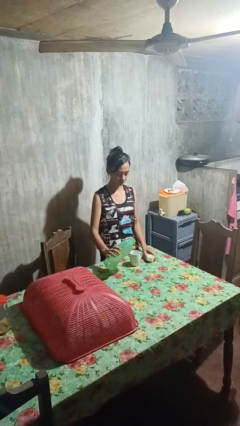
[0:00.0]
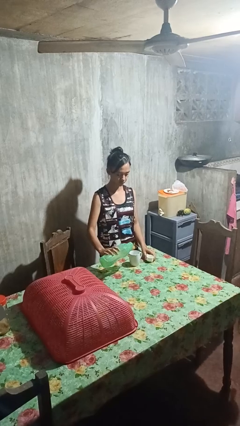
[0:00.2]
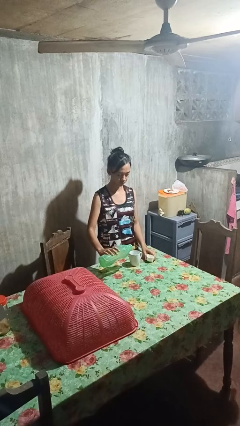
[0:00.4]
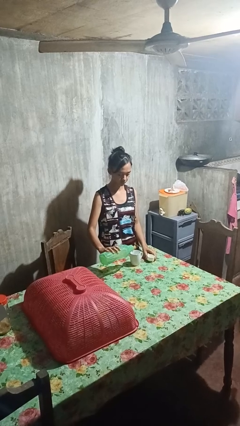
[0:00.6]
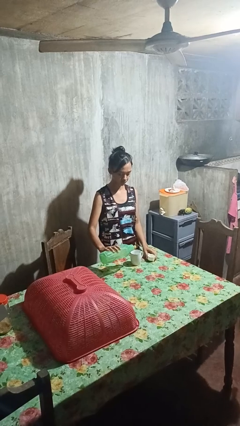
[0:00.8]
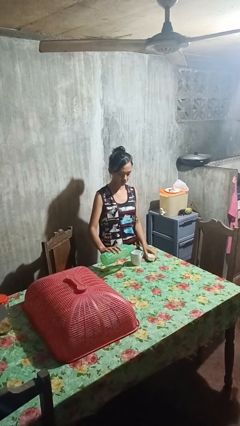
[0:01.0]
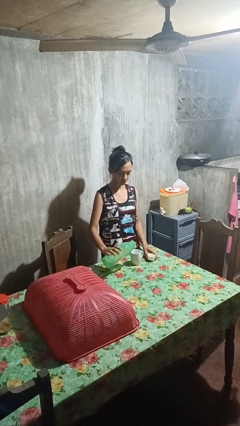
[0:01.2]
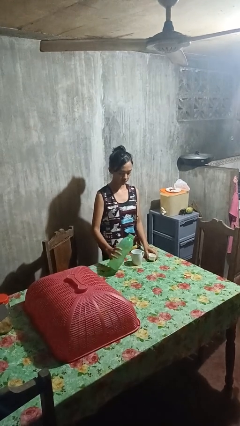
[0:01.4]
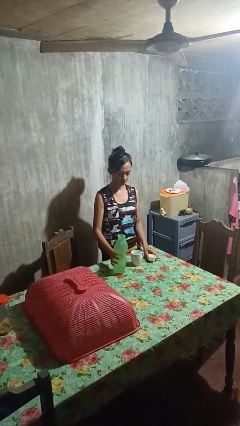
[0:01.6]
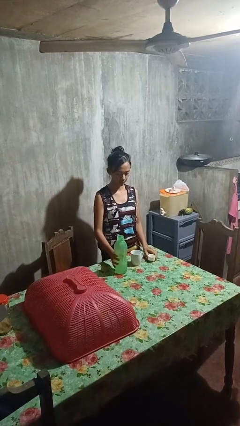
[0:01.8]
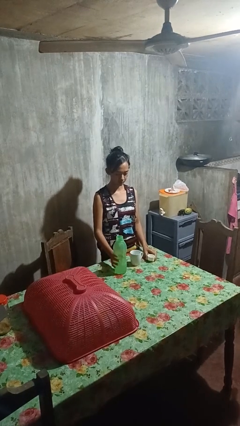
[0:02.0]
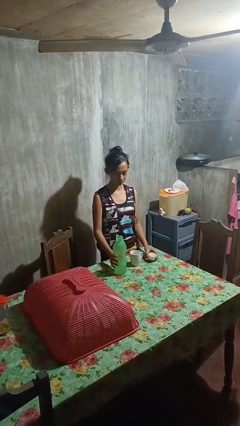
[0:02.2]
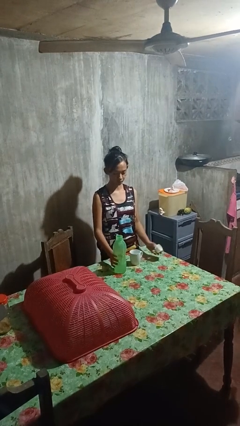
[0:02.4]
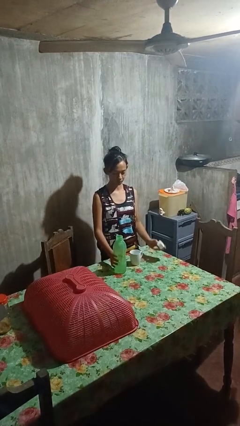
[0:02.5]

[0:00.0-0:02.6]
person pours liquid into cup

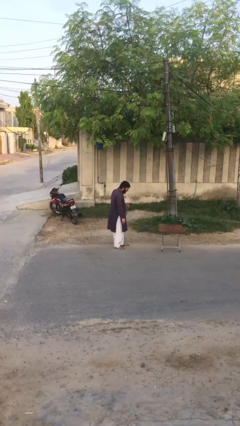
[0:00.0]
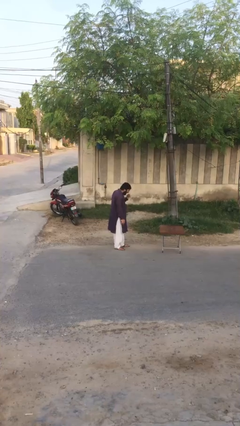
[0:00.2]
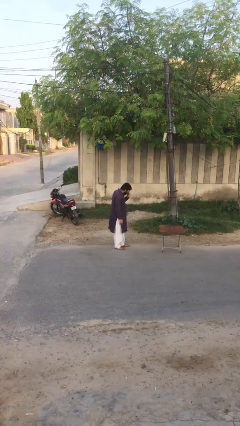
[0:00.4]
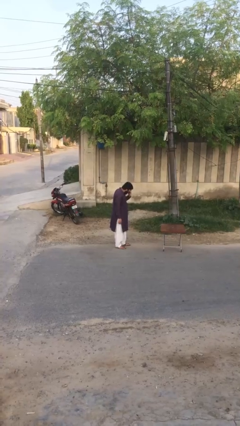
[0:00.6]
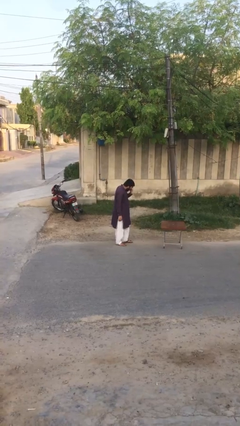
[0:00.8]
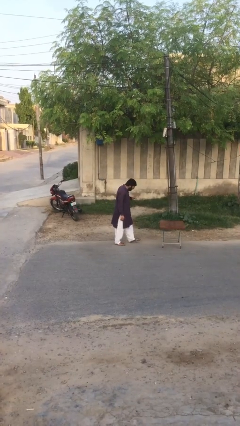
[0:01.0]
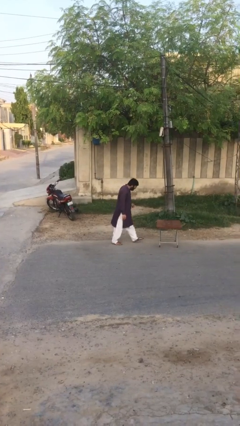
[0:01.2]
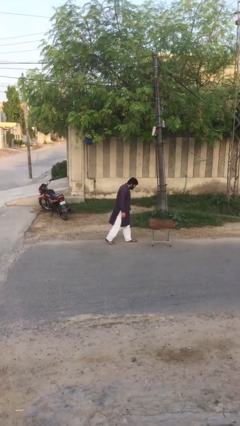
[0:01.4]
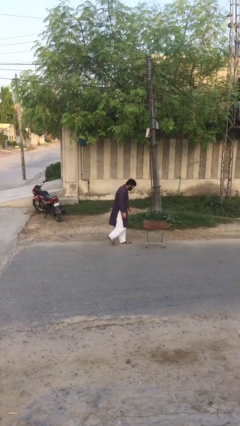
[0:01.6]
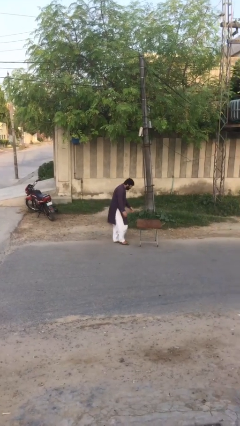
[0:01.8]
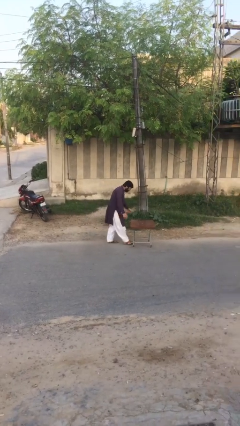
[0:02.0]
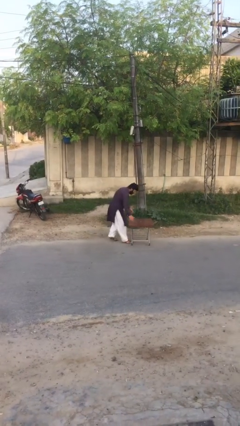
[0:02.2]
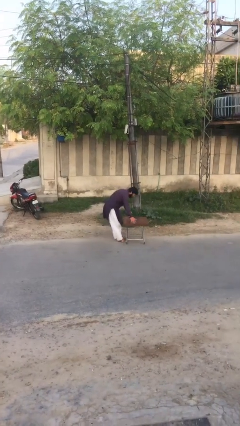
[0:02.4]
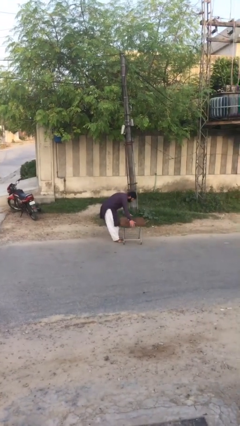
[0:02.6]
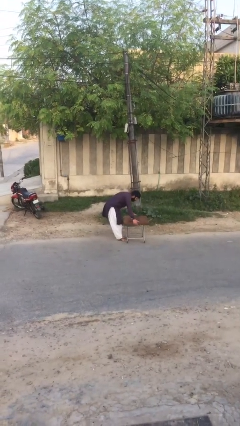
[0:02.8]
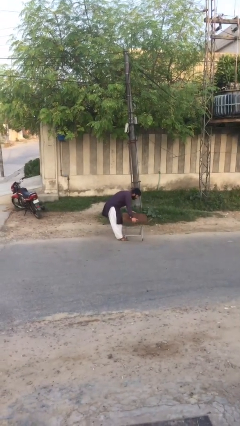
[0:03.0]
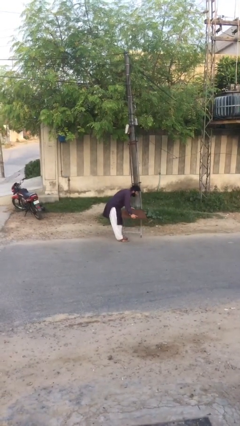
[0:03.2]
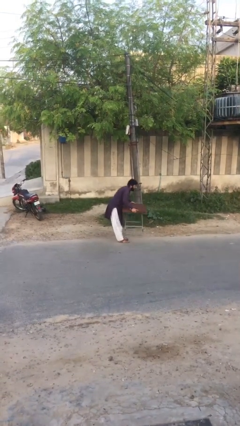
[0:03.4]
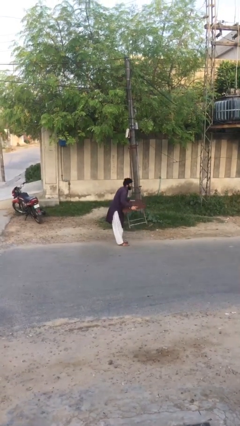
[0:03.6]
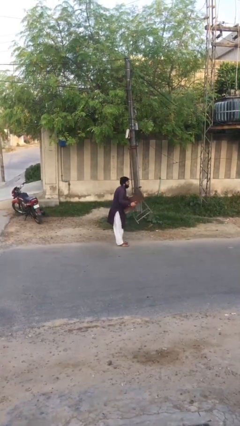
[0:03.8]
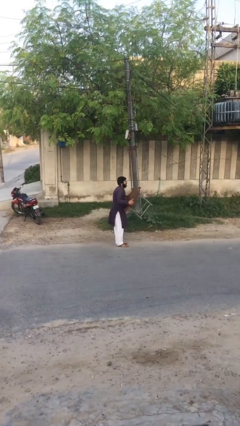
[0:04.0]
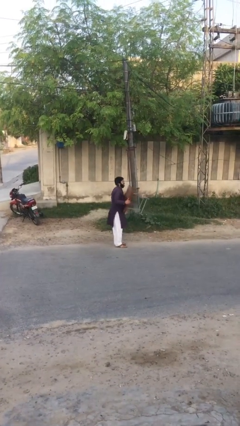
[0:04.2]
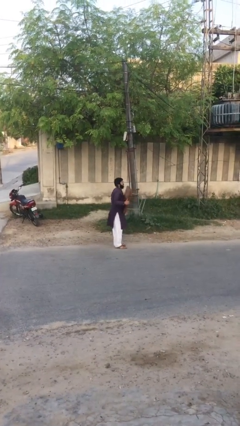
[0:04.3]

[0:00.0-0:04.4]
person picks up object from floor

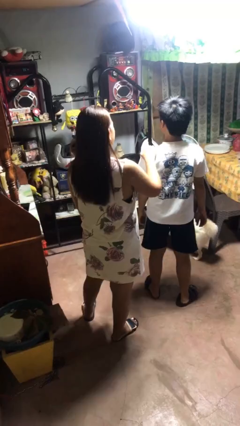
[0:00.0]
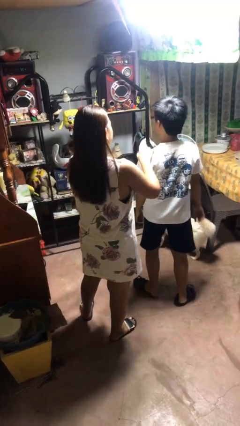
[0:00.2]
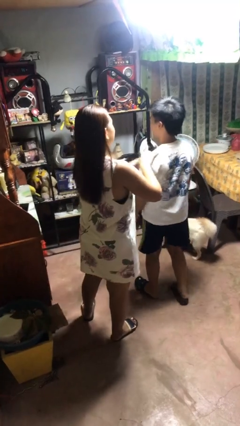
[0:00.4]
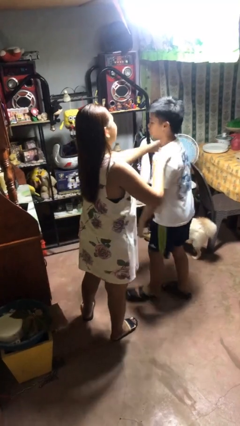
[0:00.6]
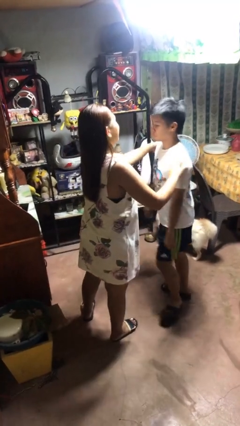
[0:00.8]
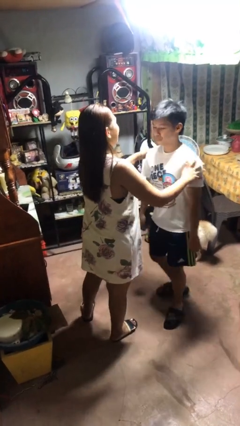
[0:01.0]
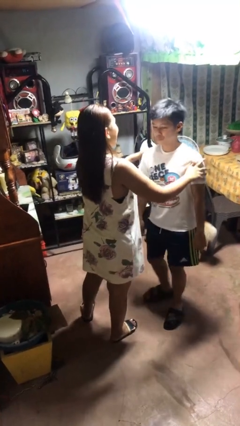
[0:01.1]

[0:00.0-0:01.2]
person spins person around

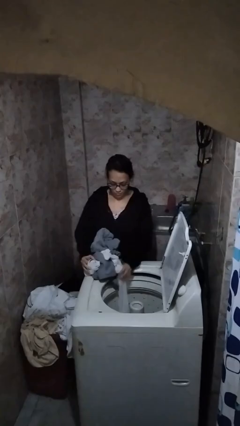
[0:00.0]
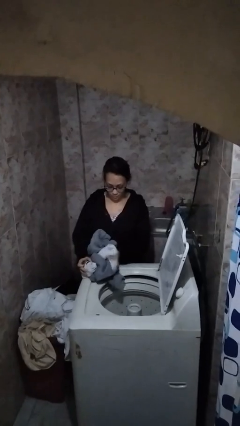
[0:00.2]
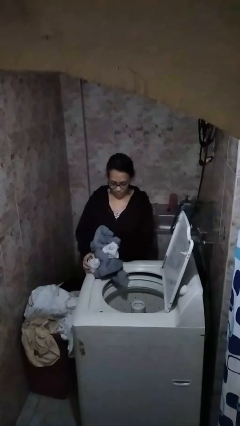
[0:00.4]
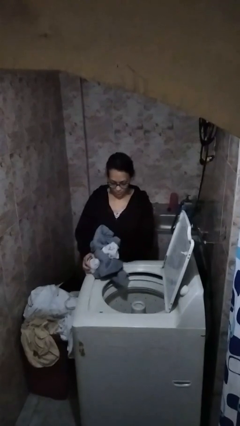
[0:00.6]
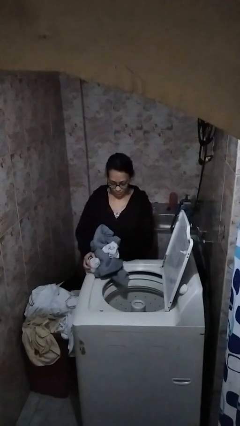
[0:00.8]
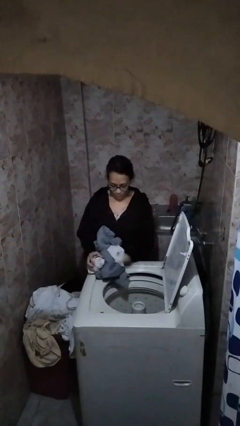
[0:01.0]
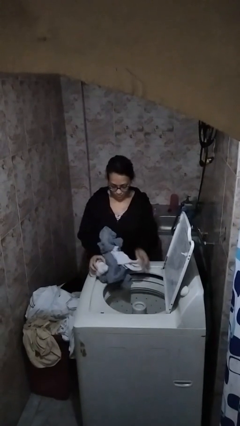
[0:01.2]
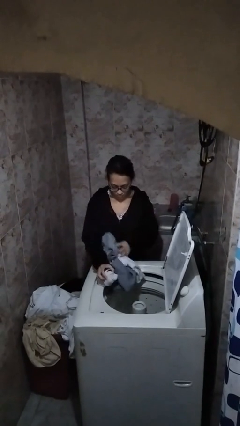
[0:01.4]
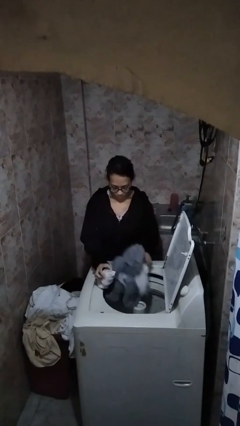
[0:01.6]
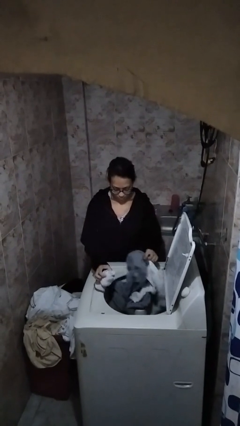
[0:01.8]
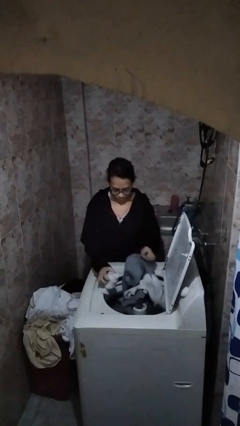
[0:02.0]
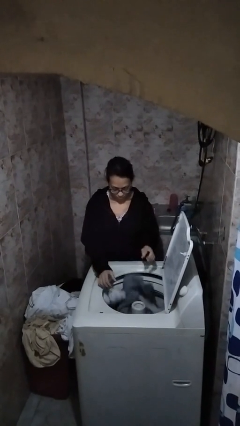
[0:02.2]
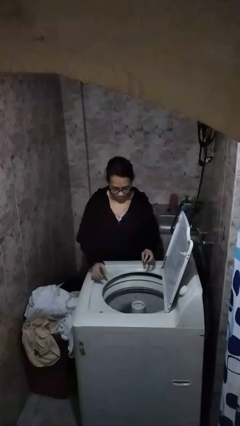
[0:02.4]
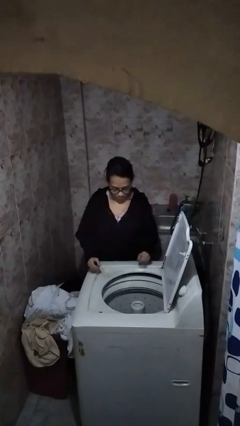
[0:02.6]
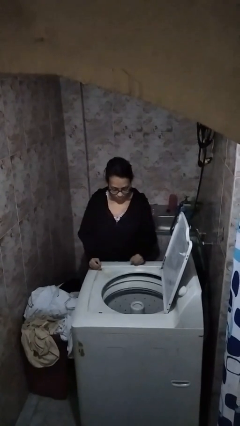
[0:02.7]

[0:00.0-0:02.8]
person loads dryer

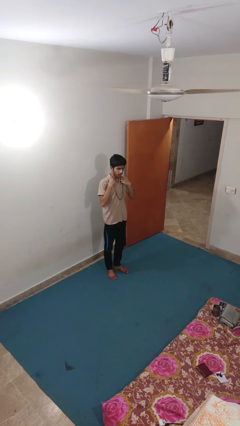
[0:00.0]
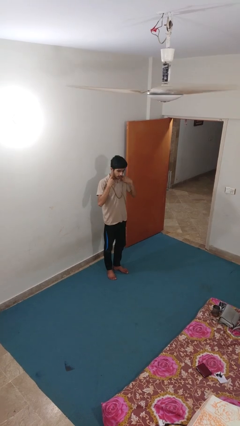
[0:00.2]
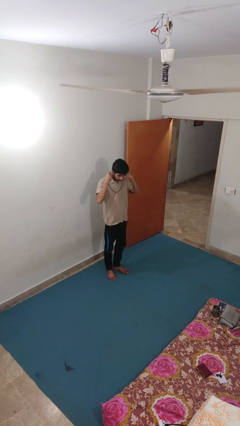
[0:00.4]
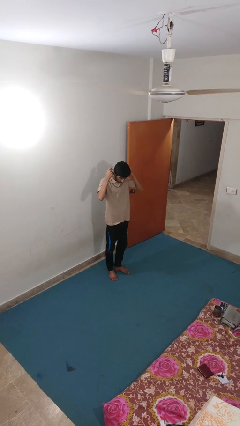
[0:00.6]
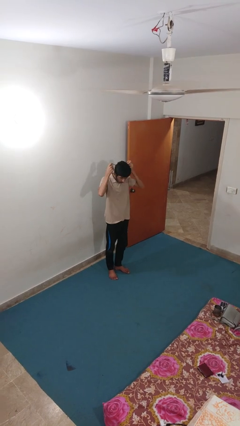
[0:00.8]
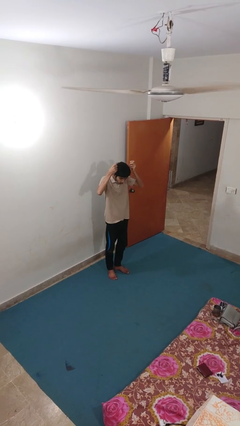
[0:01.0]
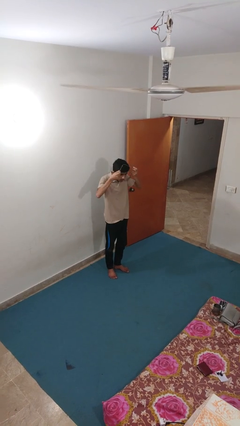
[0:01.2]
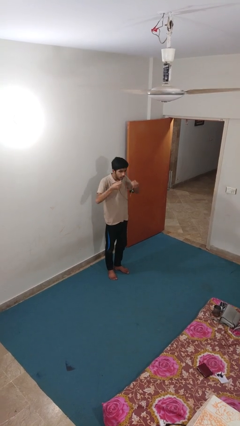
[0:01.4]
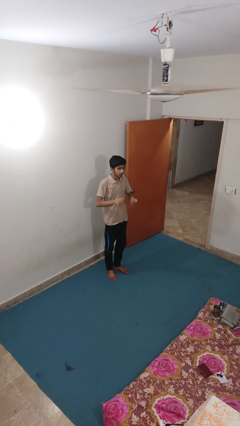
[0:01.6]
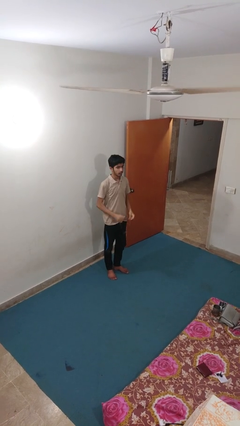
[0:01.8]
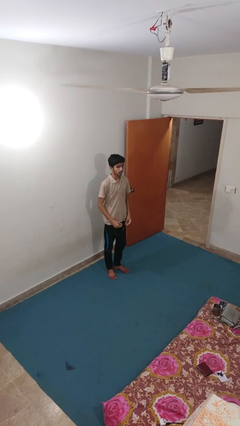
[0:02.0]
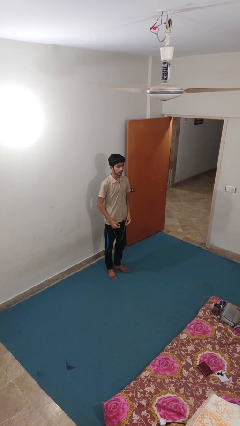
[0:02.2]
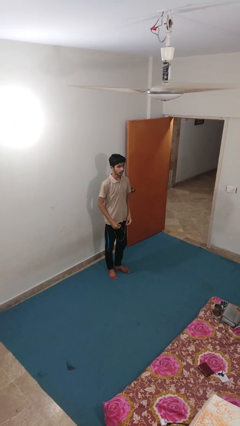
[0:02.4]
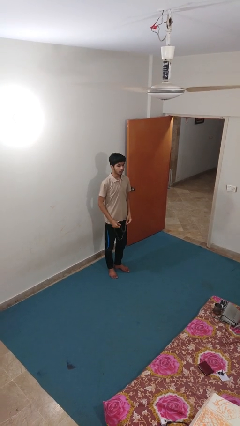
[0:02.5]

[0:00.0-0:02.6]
person takes off necklace

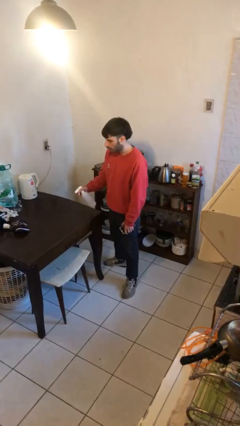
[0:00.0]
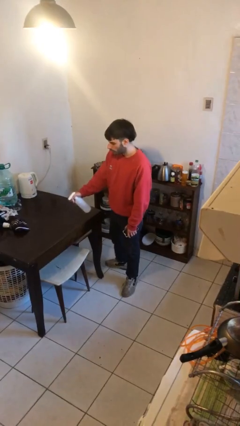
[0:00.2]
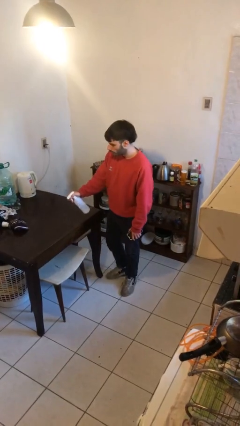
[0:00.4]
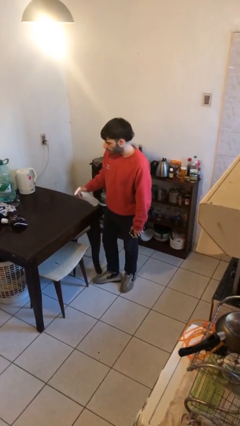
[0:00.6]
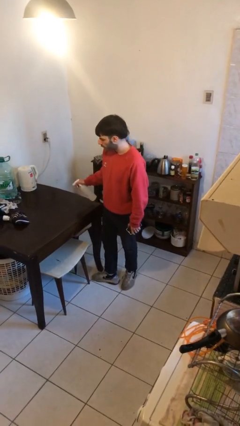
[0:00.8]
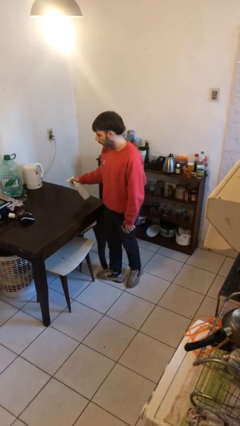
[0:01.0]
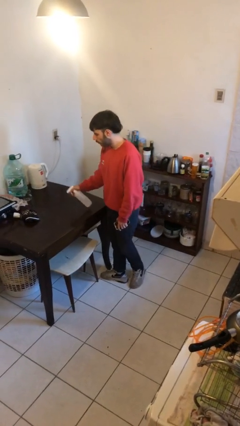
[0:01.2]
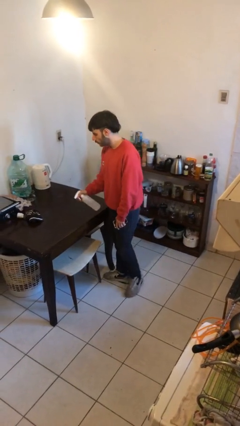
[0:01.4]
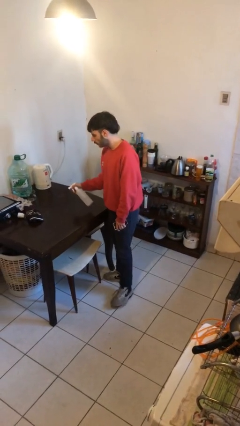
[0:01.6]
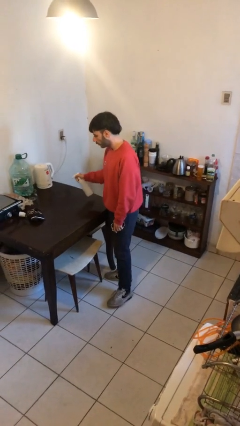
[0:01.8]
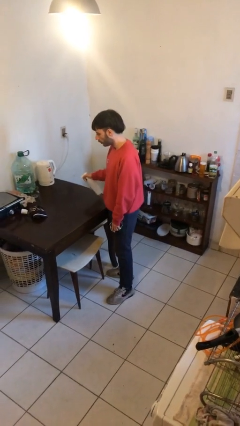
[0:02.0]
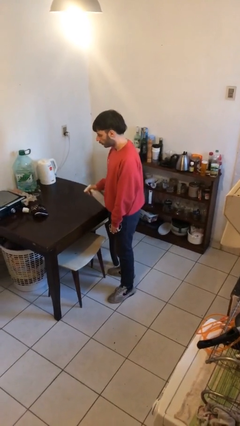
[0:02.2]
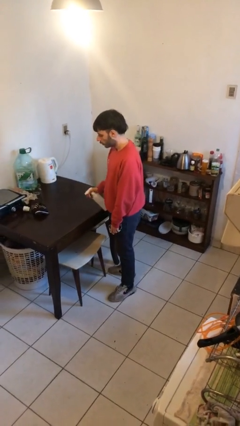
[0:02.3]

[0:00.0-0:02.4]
person sprays from bottle

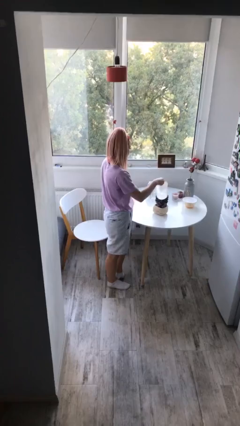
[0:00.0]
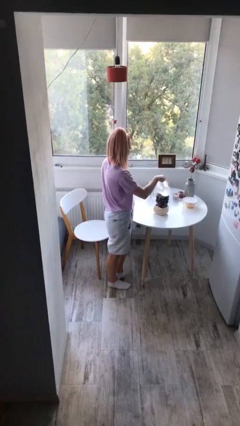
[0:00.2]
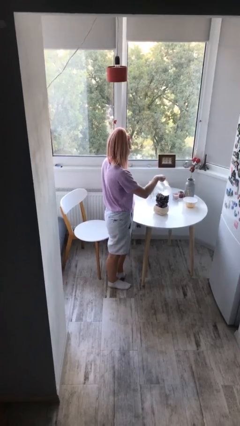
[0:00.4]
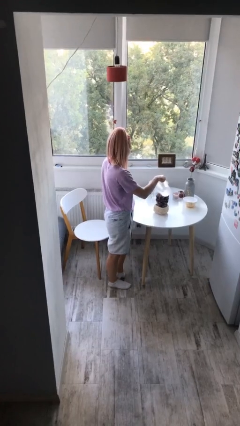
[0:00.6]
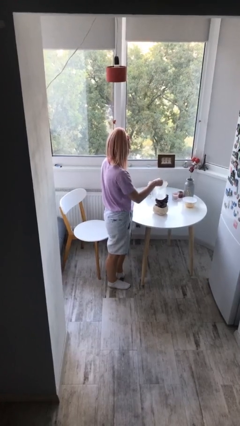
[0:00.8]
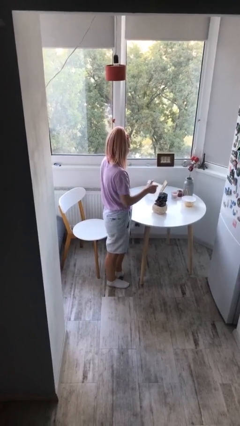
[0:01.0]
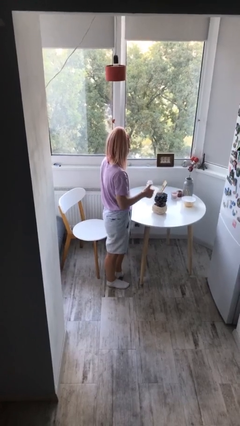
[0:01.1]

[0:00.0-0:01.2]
person waters houseplant

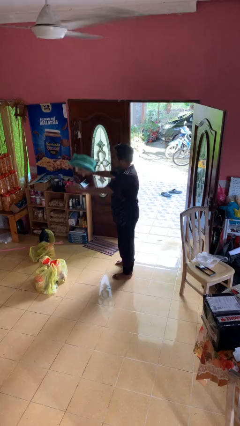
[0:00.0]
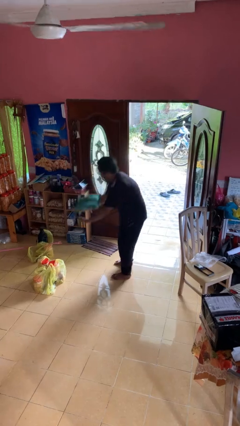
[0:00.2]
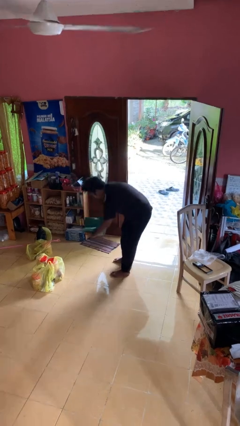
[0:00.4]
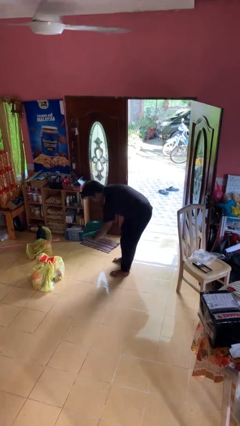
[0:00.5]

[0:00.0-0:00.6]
person drops object
